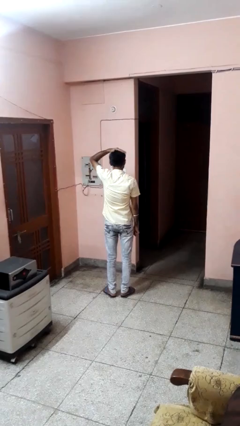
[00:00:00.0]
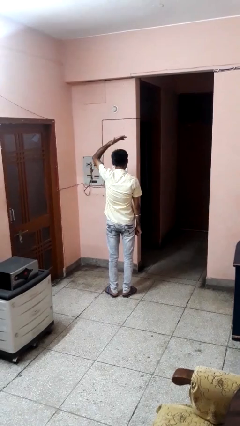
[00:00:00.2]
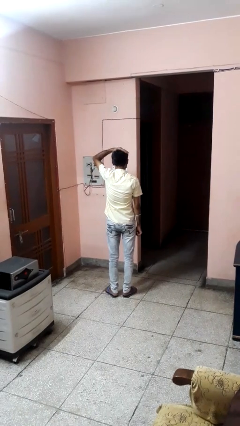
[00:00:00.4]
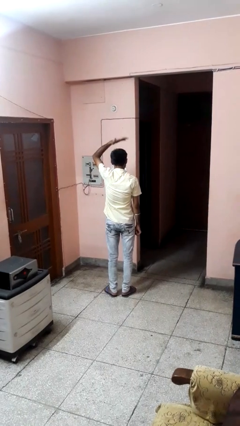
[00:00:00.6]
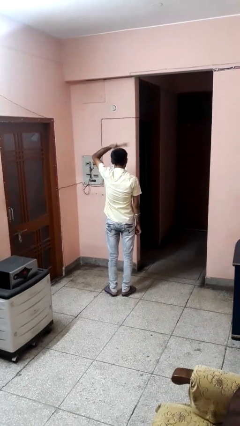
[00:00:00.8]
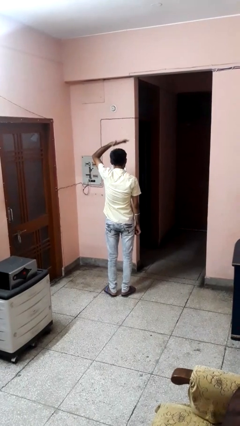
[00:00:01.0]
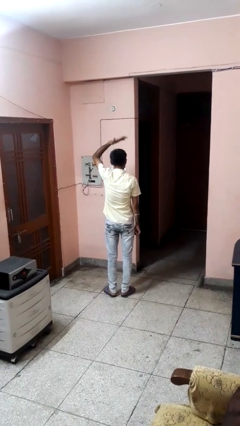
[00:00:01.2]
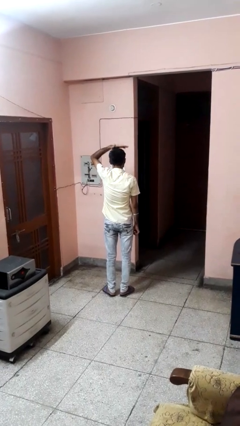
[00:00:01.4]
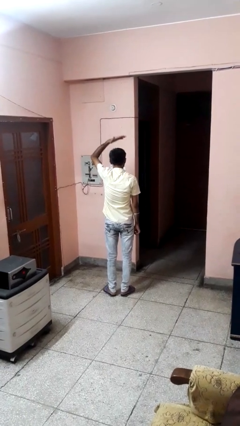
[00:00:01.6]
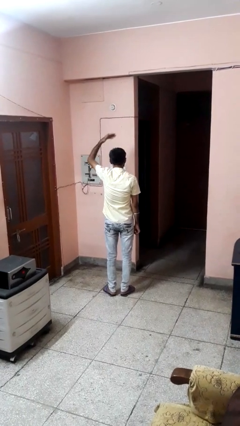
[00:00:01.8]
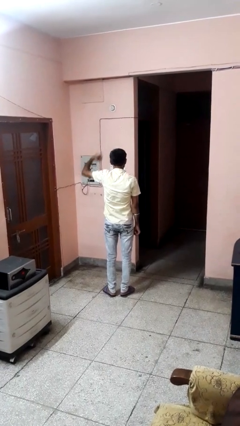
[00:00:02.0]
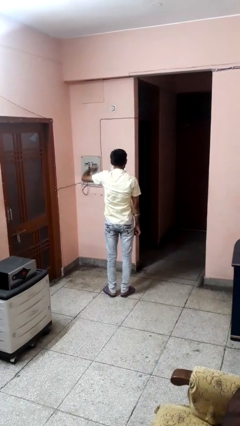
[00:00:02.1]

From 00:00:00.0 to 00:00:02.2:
person pats head

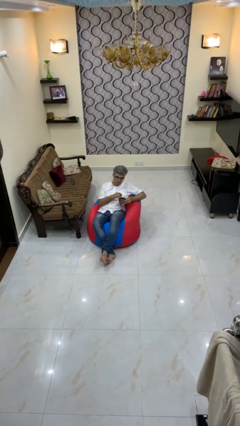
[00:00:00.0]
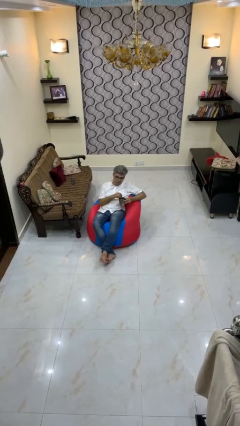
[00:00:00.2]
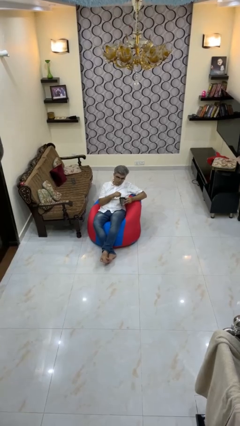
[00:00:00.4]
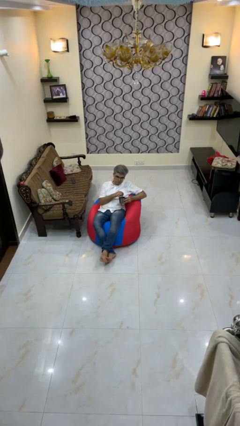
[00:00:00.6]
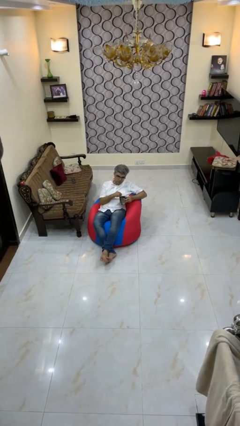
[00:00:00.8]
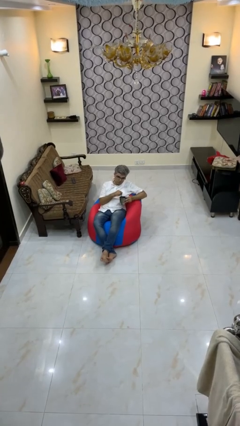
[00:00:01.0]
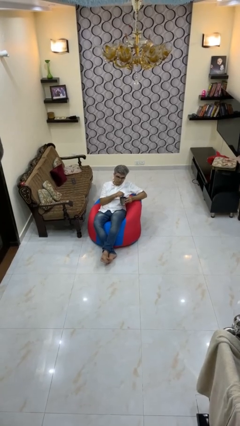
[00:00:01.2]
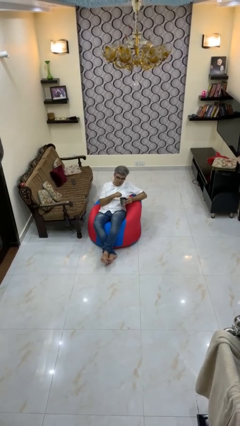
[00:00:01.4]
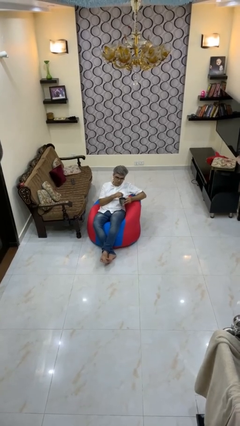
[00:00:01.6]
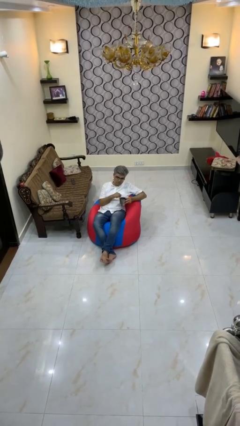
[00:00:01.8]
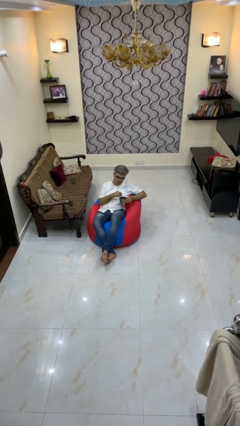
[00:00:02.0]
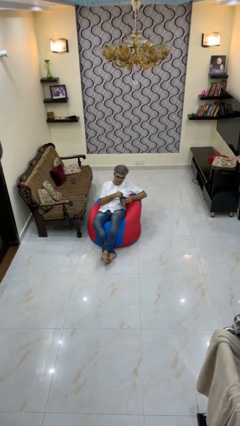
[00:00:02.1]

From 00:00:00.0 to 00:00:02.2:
person stirs mug

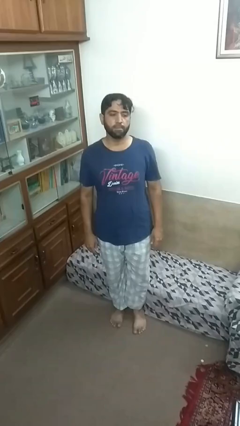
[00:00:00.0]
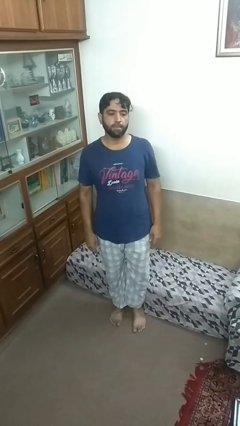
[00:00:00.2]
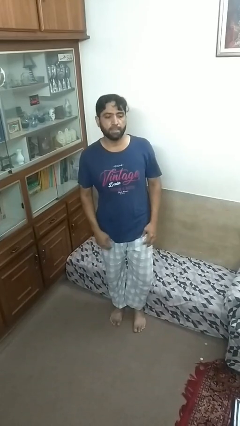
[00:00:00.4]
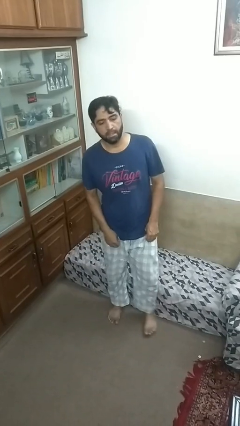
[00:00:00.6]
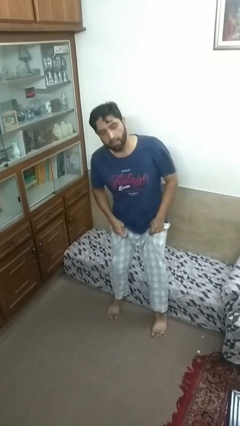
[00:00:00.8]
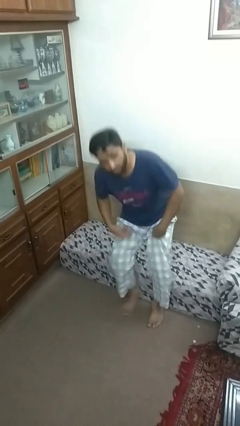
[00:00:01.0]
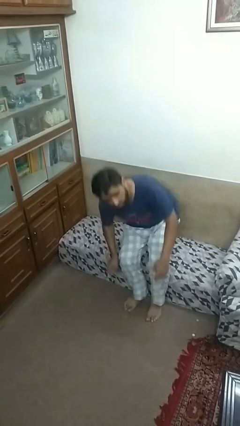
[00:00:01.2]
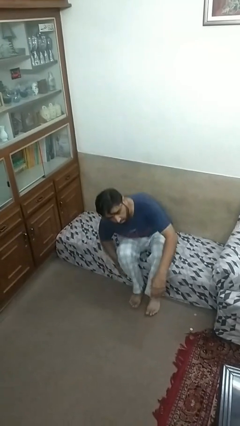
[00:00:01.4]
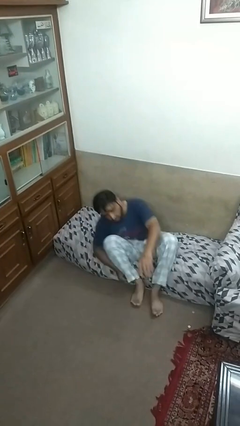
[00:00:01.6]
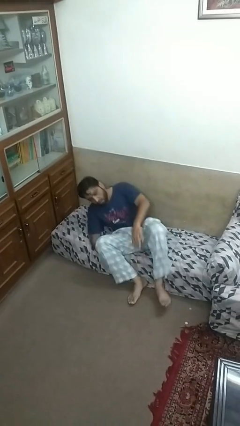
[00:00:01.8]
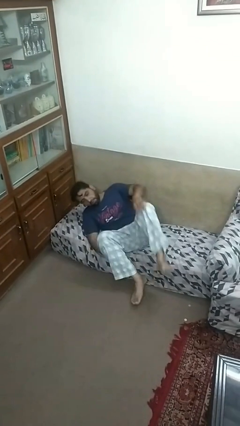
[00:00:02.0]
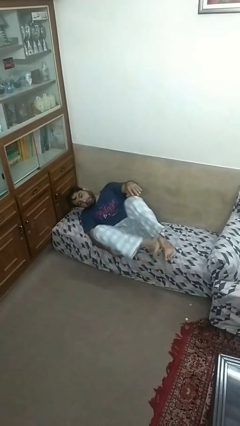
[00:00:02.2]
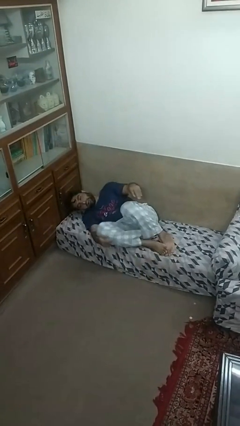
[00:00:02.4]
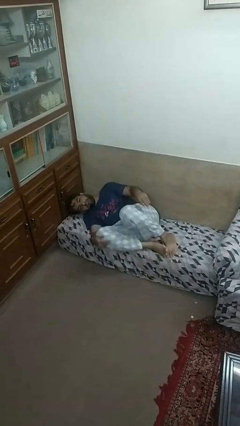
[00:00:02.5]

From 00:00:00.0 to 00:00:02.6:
person lies down on couch

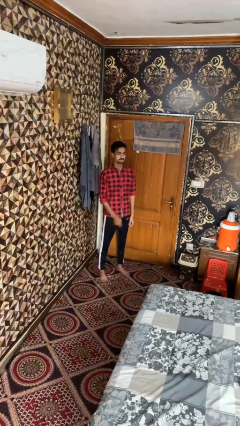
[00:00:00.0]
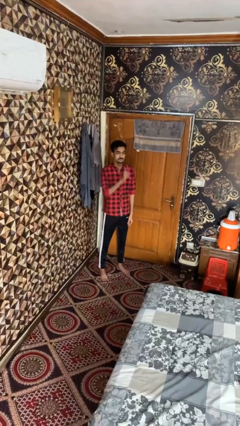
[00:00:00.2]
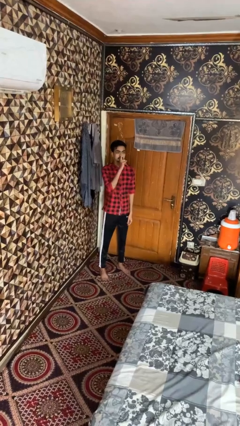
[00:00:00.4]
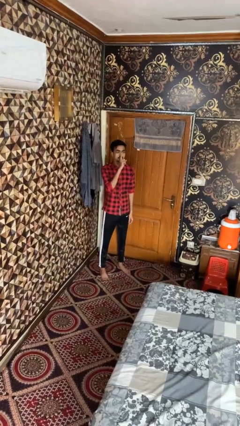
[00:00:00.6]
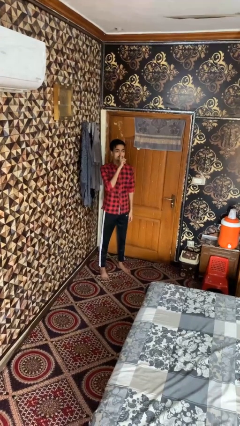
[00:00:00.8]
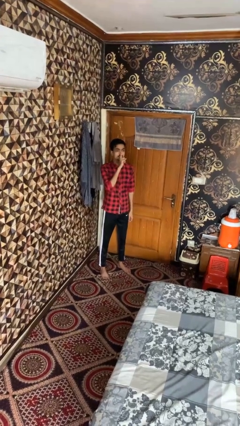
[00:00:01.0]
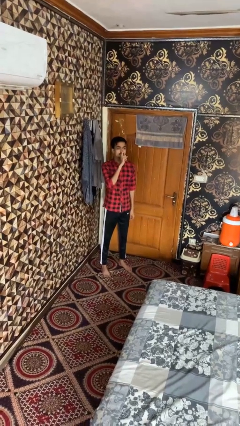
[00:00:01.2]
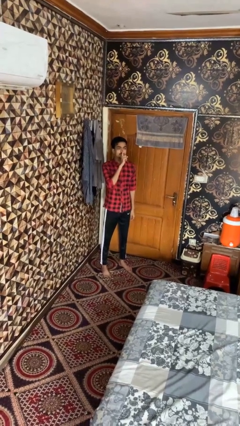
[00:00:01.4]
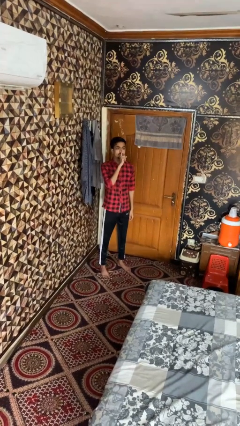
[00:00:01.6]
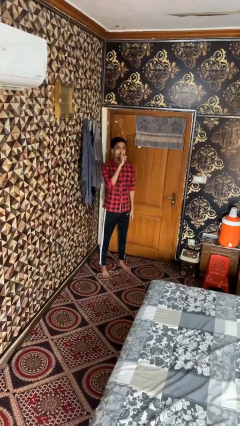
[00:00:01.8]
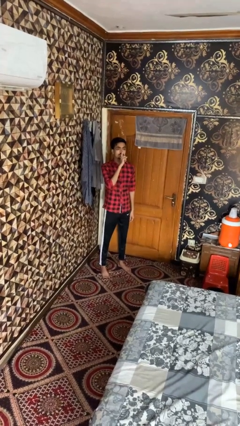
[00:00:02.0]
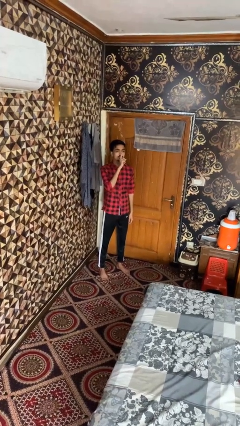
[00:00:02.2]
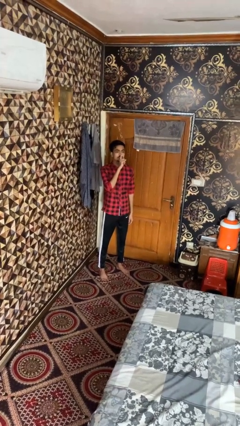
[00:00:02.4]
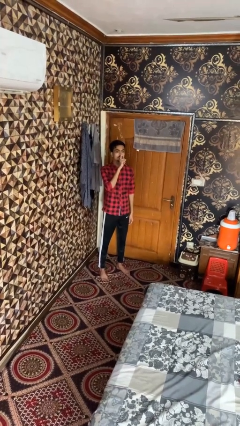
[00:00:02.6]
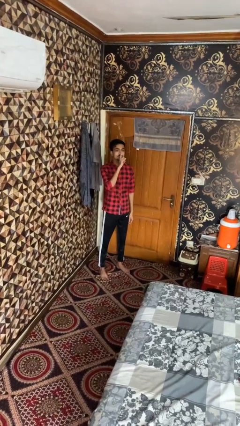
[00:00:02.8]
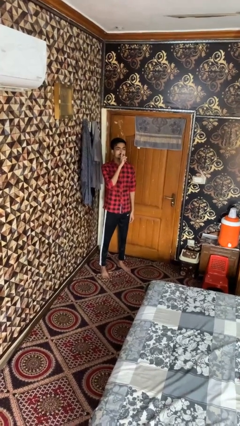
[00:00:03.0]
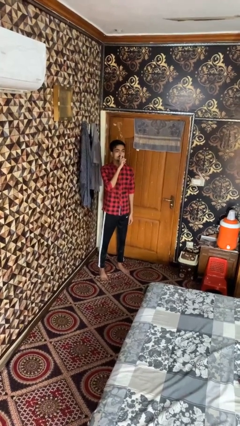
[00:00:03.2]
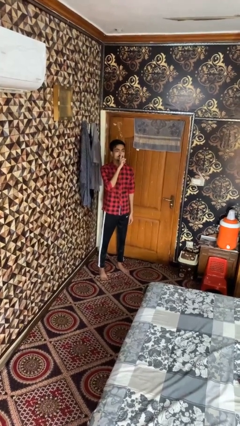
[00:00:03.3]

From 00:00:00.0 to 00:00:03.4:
person gestures be quiet

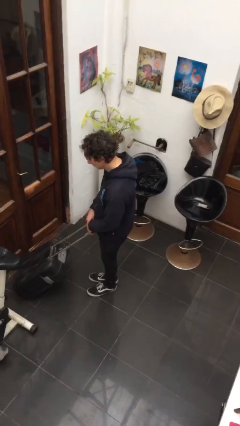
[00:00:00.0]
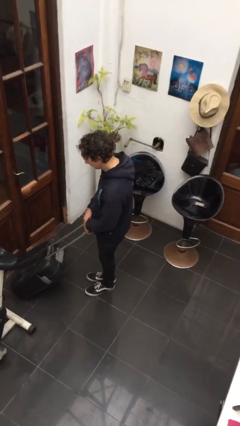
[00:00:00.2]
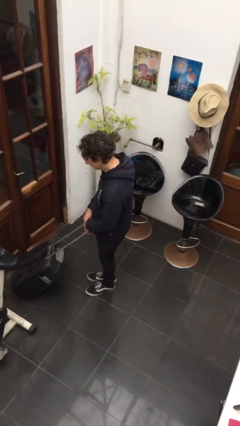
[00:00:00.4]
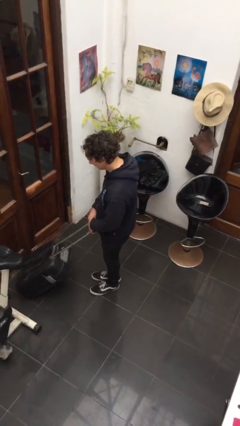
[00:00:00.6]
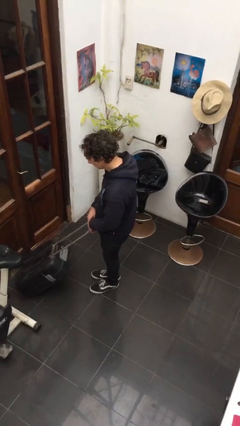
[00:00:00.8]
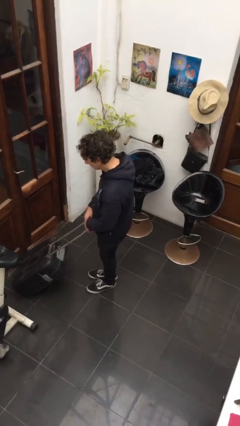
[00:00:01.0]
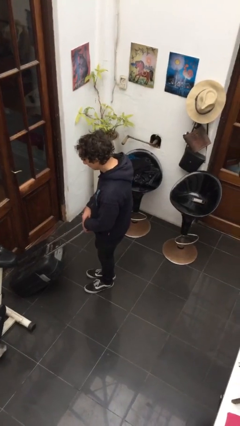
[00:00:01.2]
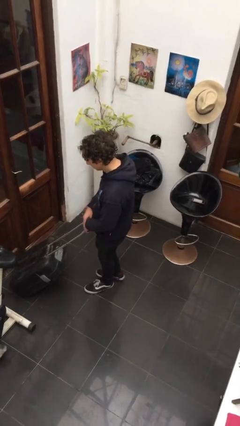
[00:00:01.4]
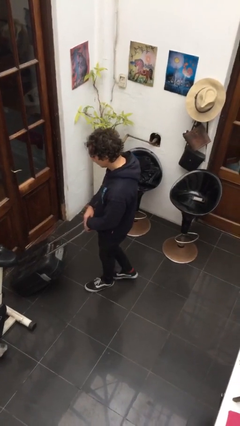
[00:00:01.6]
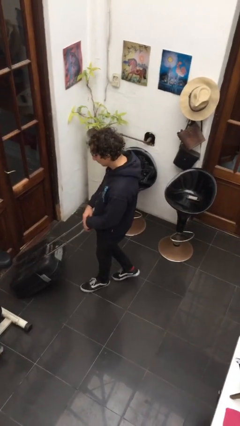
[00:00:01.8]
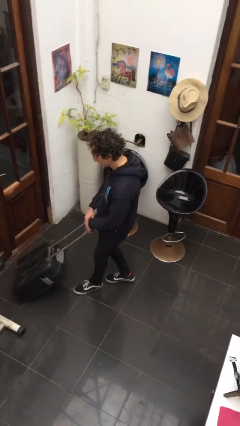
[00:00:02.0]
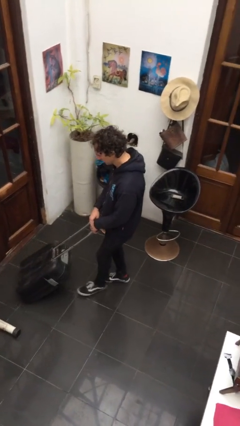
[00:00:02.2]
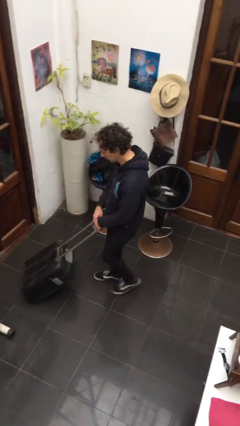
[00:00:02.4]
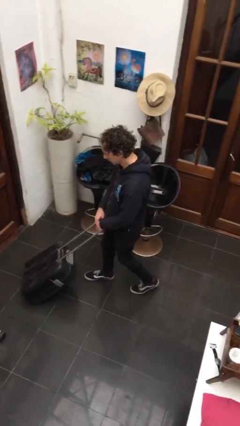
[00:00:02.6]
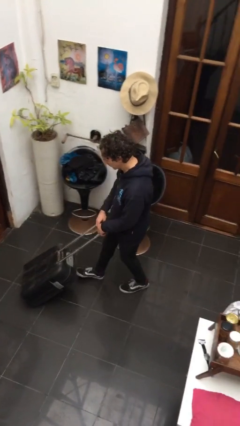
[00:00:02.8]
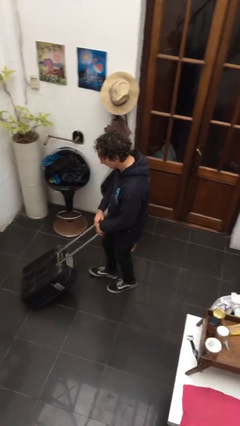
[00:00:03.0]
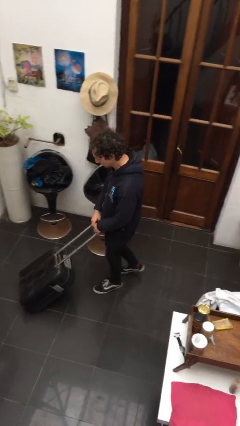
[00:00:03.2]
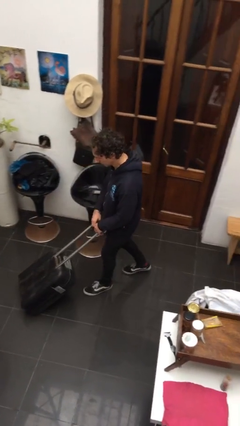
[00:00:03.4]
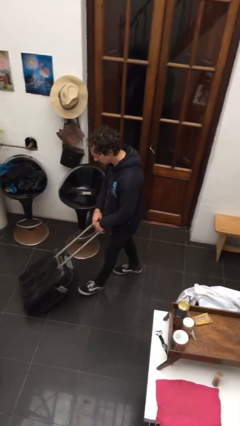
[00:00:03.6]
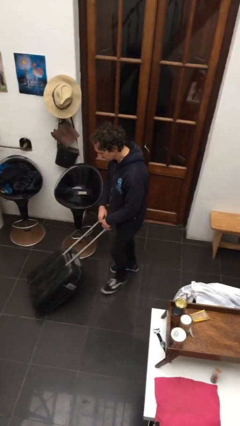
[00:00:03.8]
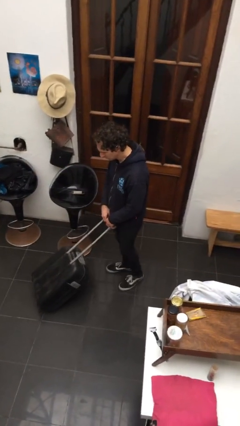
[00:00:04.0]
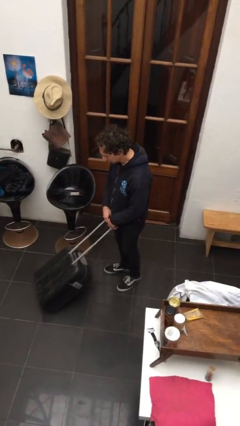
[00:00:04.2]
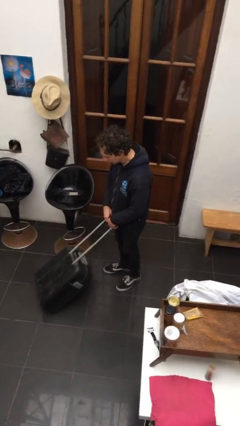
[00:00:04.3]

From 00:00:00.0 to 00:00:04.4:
person pulls wheeled cart

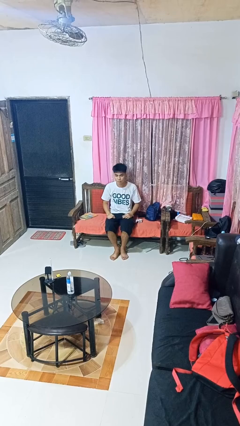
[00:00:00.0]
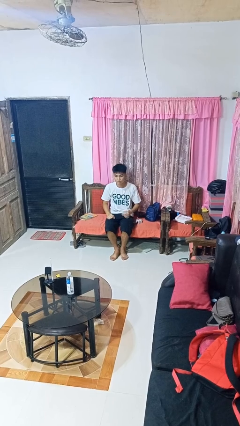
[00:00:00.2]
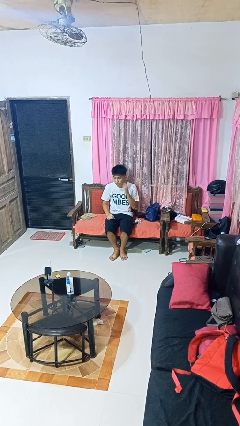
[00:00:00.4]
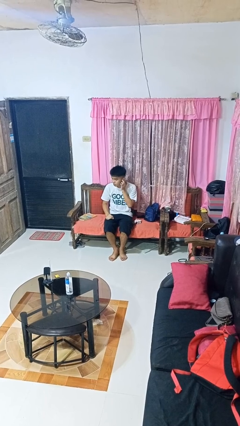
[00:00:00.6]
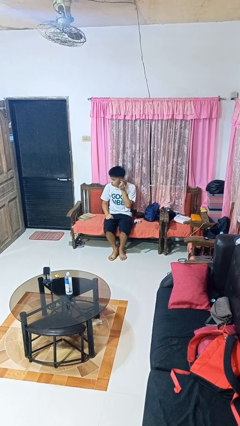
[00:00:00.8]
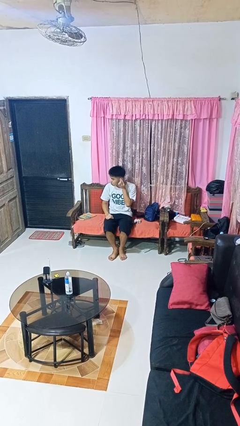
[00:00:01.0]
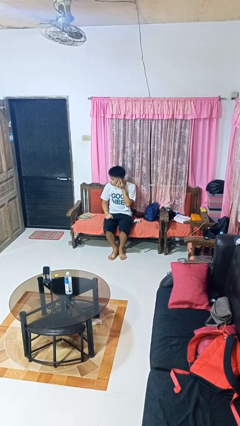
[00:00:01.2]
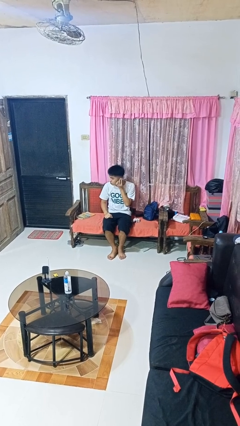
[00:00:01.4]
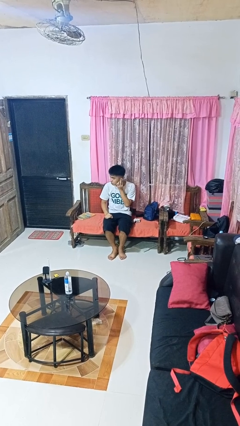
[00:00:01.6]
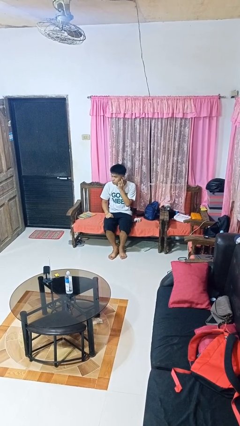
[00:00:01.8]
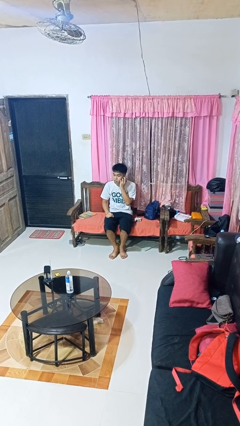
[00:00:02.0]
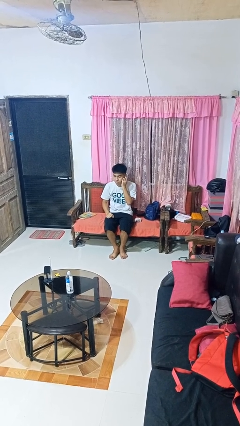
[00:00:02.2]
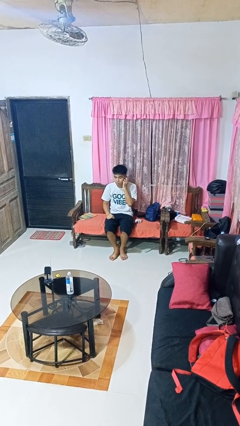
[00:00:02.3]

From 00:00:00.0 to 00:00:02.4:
person touches earlobe
